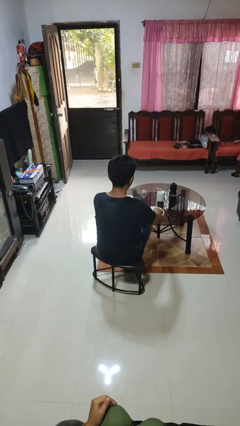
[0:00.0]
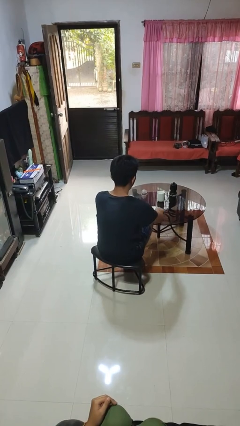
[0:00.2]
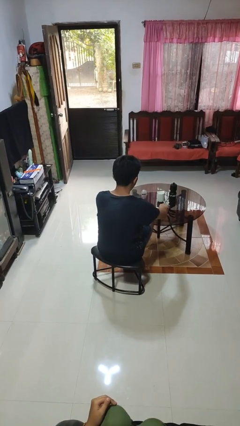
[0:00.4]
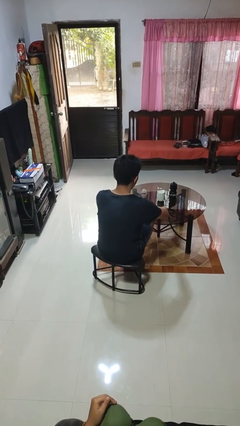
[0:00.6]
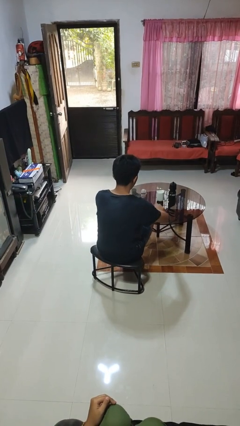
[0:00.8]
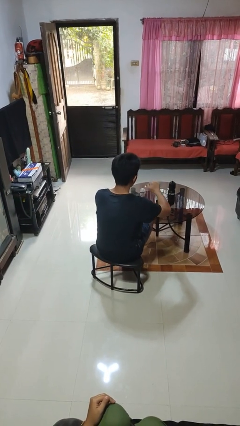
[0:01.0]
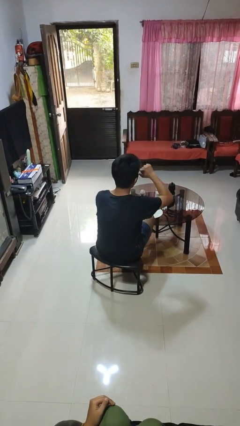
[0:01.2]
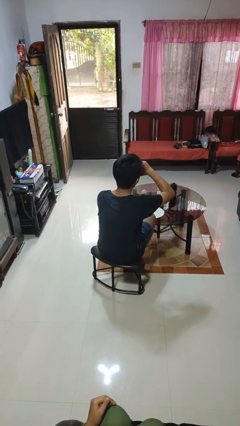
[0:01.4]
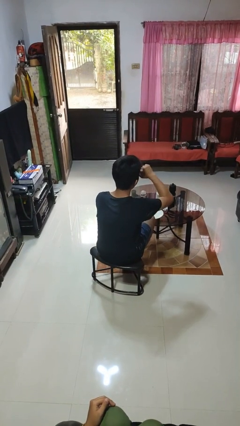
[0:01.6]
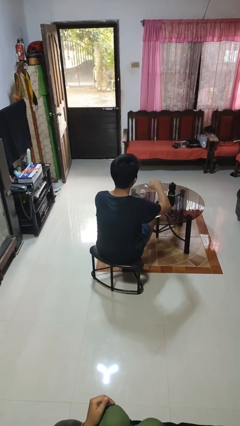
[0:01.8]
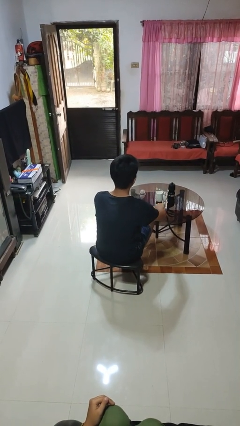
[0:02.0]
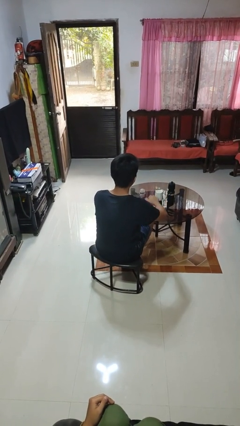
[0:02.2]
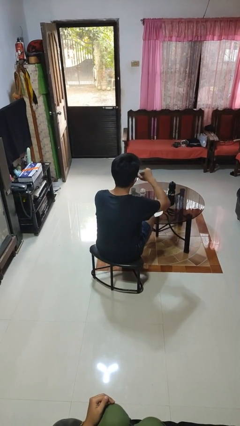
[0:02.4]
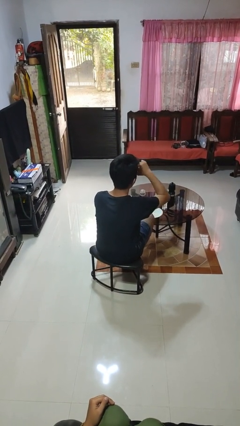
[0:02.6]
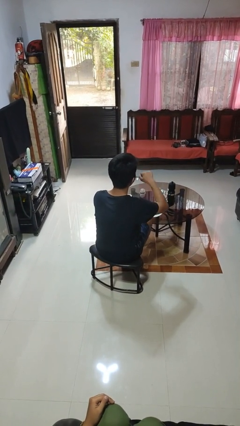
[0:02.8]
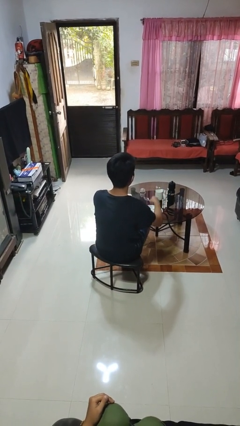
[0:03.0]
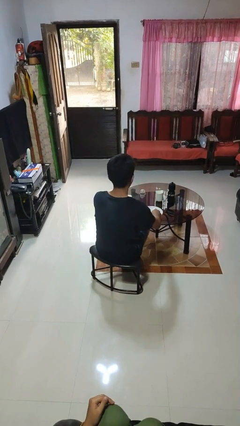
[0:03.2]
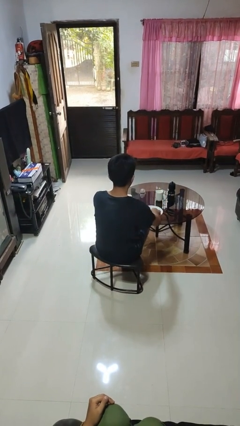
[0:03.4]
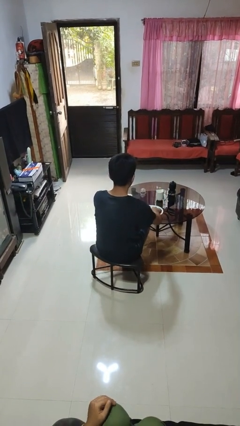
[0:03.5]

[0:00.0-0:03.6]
person eats with utensil

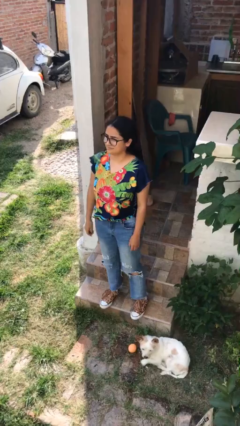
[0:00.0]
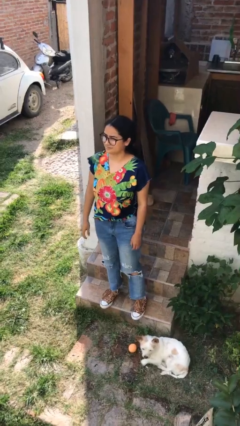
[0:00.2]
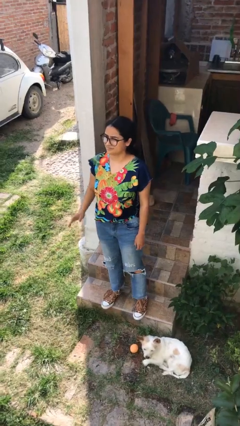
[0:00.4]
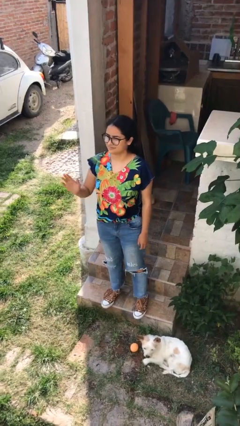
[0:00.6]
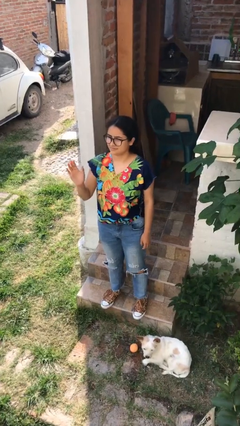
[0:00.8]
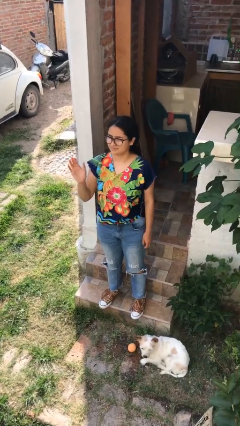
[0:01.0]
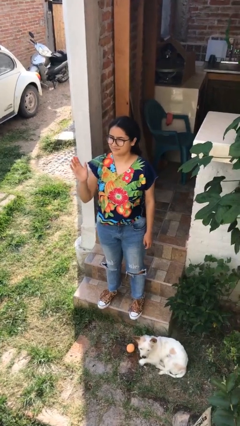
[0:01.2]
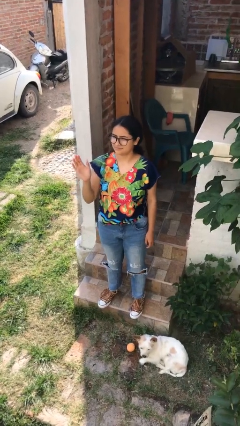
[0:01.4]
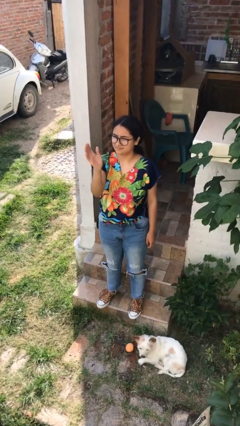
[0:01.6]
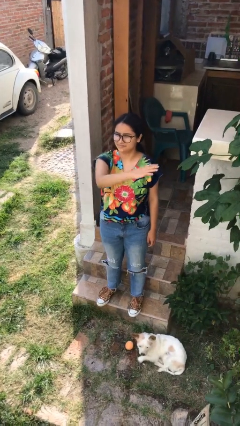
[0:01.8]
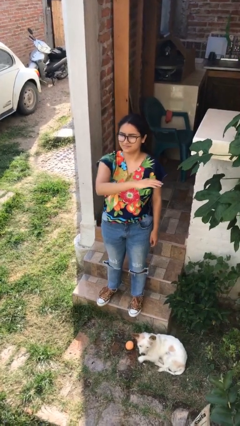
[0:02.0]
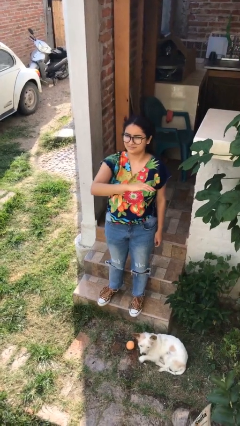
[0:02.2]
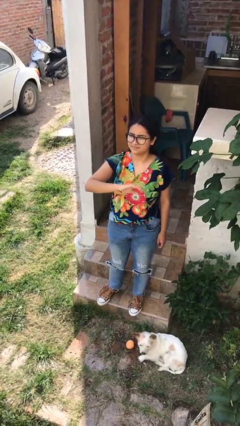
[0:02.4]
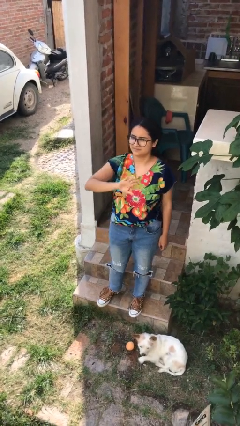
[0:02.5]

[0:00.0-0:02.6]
person gestures swipe left

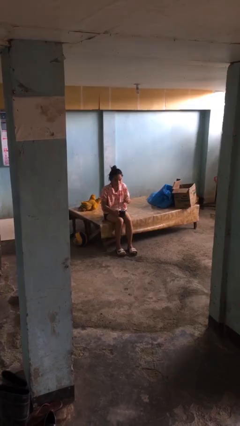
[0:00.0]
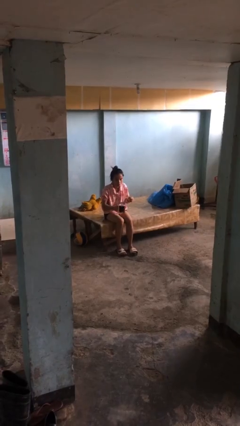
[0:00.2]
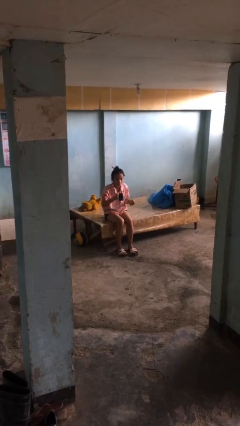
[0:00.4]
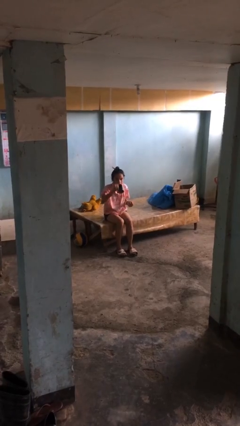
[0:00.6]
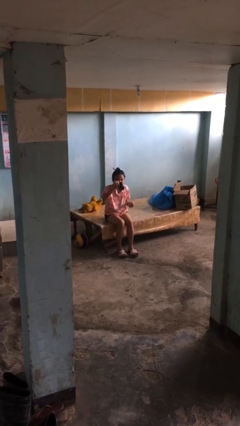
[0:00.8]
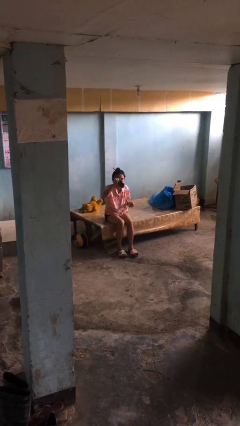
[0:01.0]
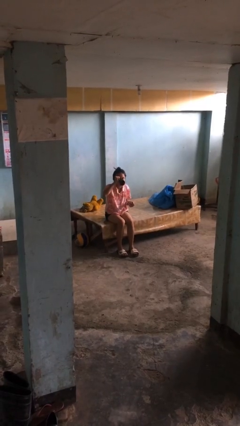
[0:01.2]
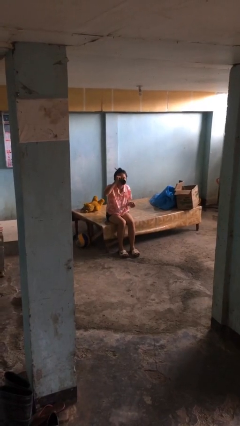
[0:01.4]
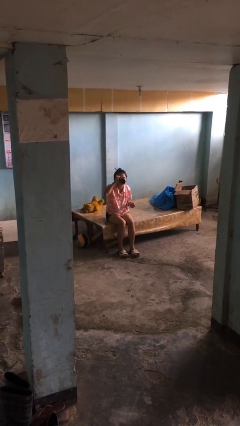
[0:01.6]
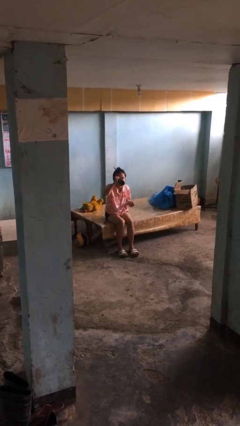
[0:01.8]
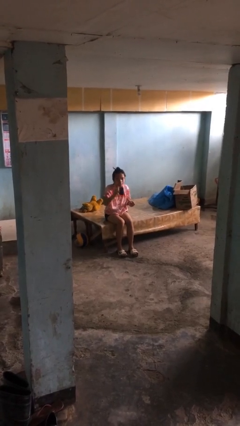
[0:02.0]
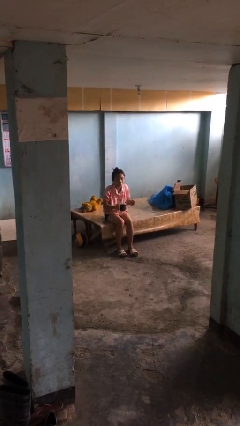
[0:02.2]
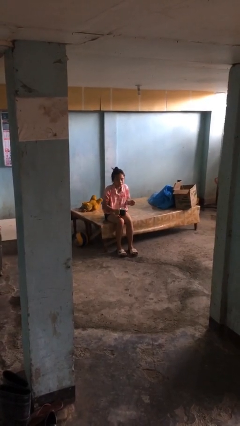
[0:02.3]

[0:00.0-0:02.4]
person drinks from mug

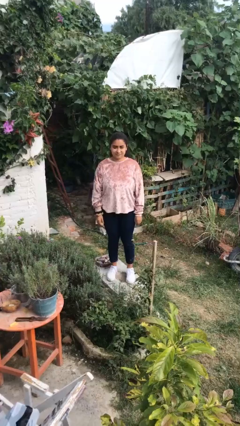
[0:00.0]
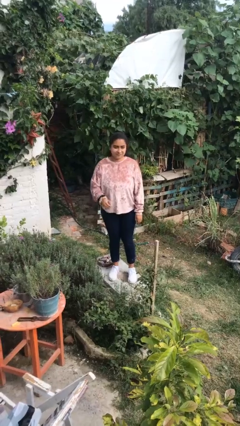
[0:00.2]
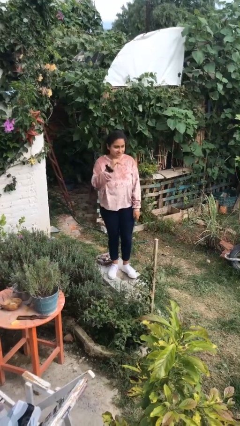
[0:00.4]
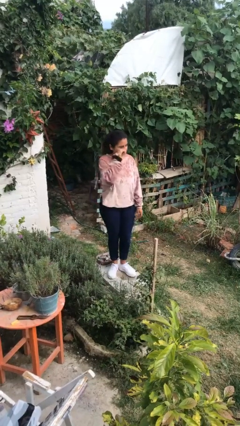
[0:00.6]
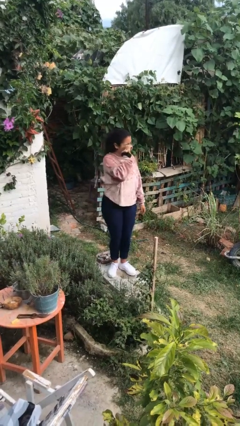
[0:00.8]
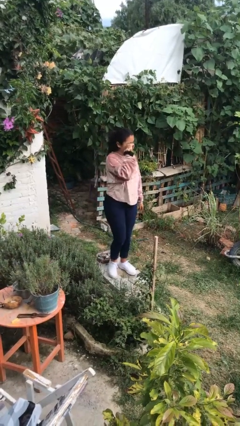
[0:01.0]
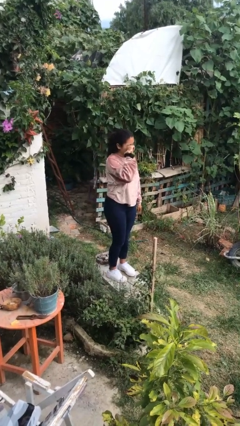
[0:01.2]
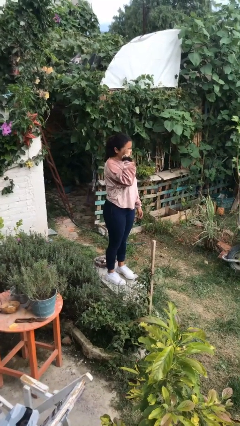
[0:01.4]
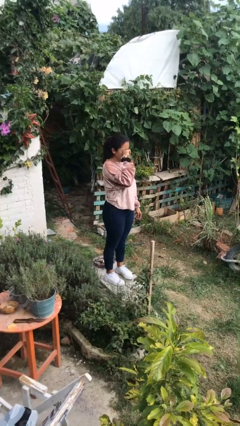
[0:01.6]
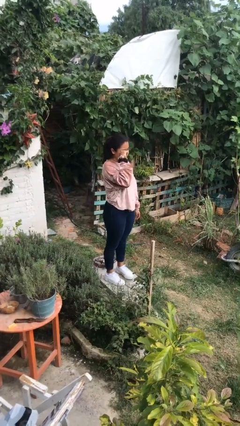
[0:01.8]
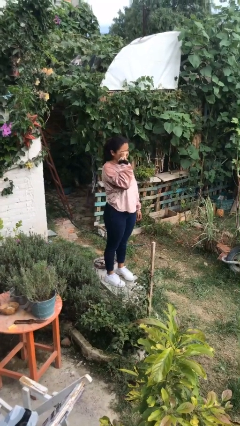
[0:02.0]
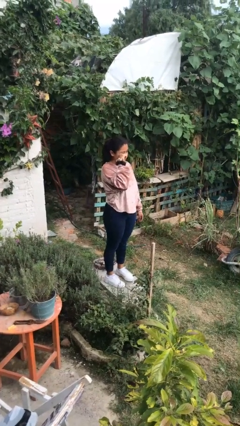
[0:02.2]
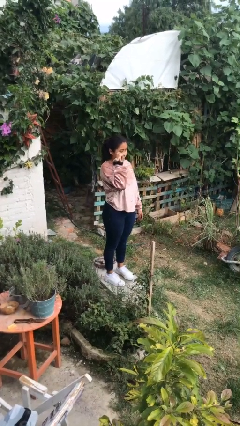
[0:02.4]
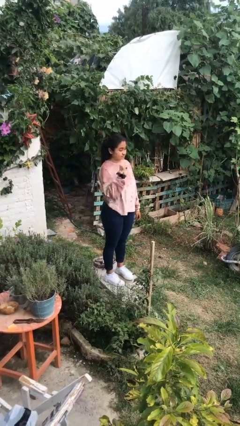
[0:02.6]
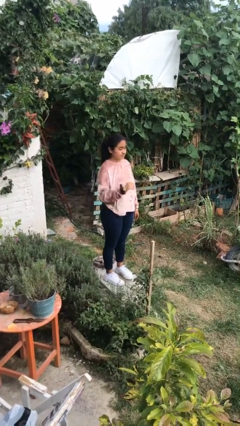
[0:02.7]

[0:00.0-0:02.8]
person rubs eyes

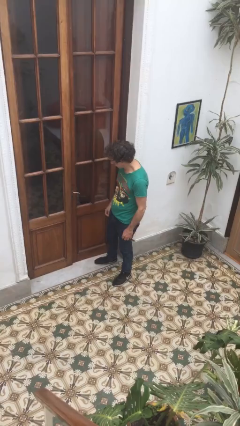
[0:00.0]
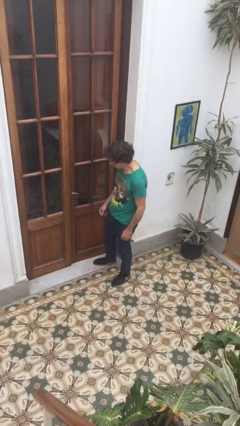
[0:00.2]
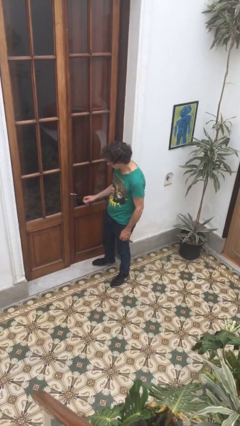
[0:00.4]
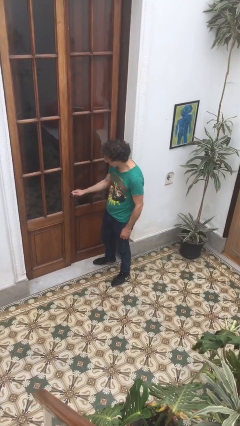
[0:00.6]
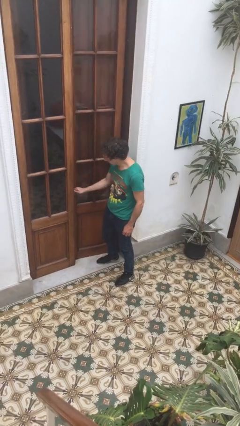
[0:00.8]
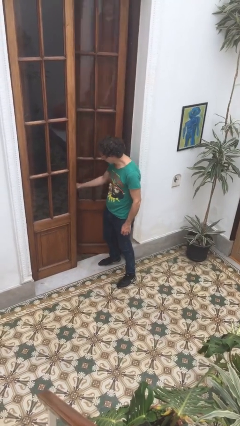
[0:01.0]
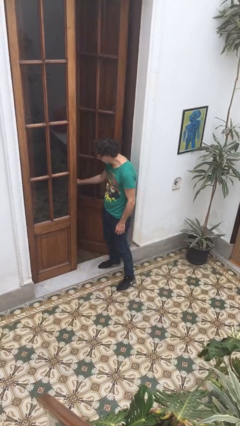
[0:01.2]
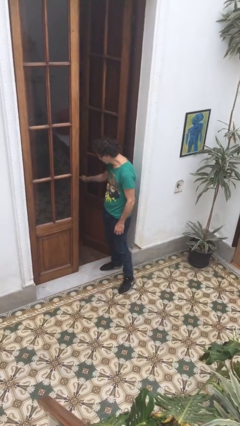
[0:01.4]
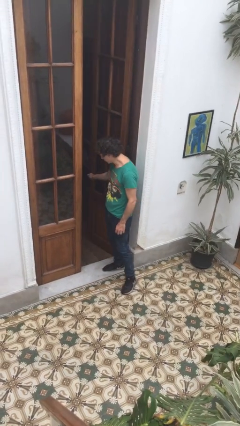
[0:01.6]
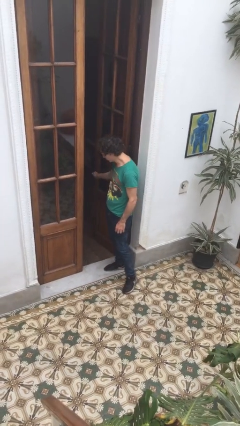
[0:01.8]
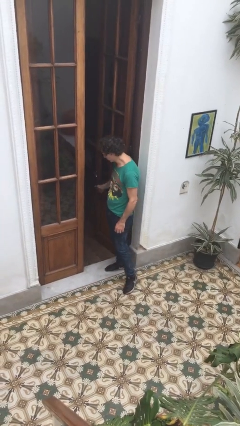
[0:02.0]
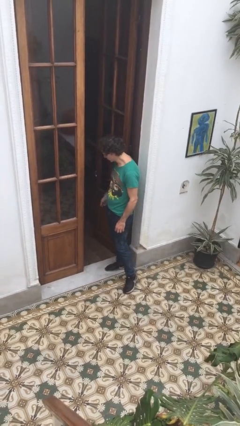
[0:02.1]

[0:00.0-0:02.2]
person opens facility door

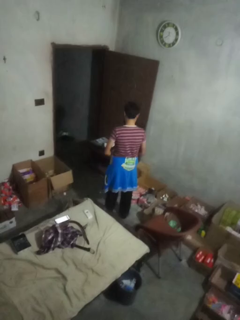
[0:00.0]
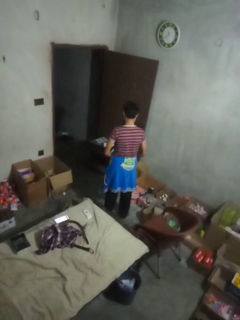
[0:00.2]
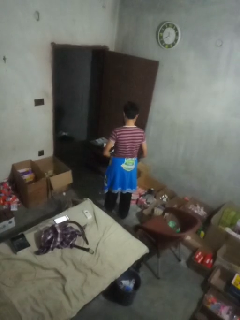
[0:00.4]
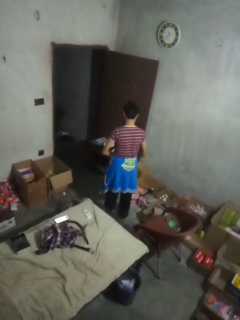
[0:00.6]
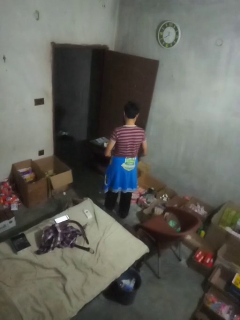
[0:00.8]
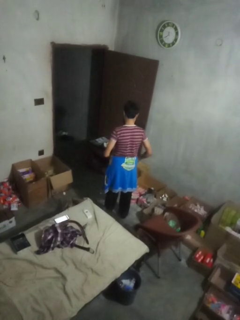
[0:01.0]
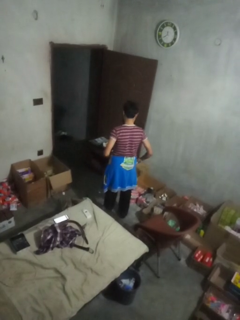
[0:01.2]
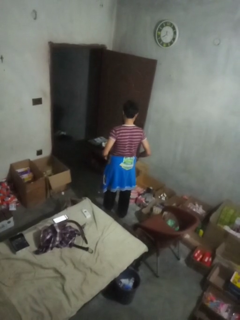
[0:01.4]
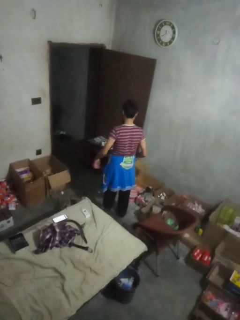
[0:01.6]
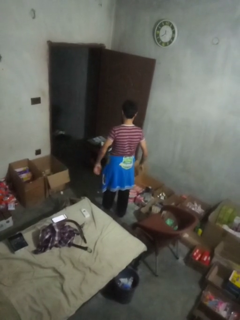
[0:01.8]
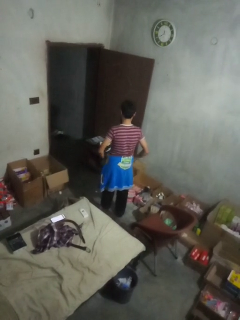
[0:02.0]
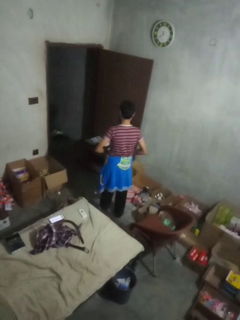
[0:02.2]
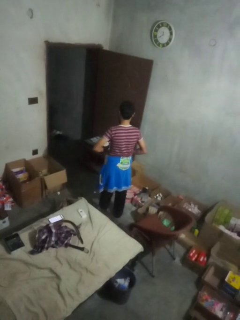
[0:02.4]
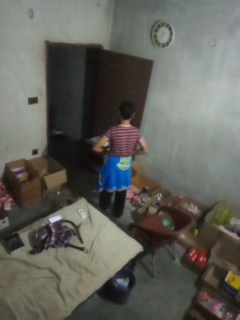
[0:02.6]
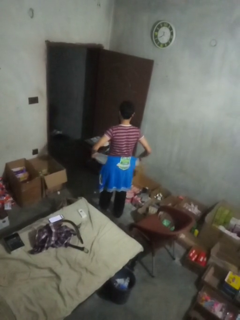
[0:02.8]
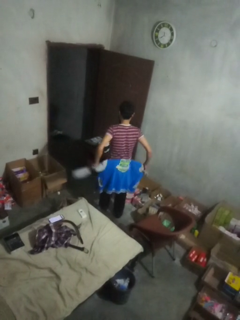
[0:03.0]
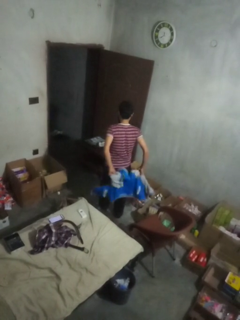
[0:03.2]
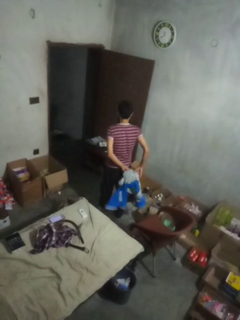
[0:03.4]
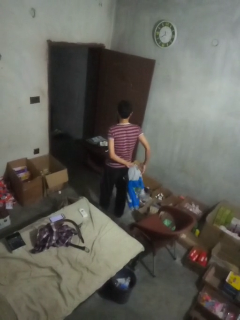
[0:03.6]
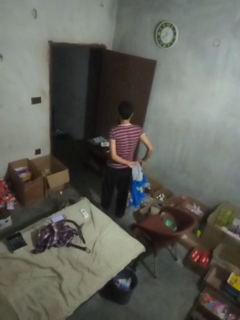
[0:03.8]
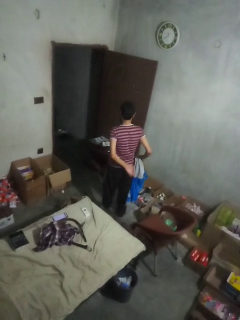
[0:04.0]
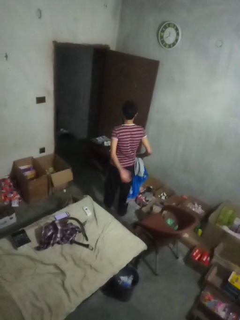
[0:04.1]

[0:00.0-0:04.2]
person unties jacket around waist

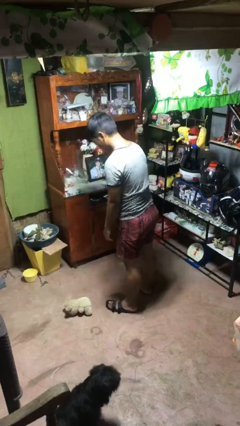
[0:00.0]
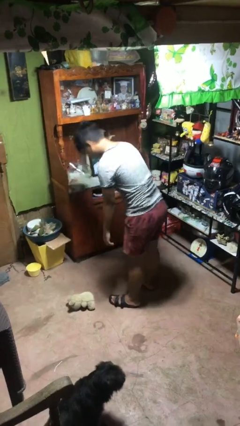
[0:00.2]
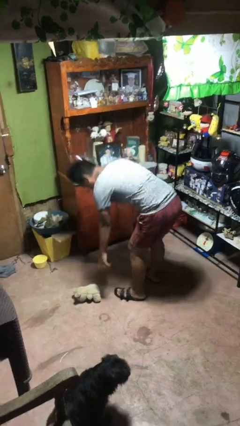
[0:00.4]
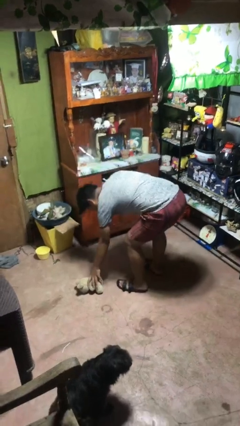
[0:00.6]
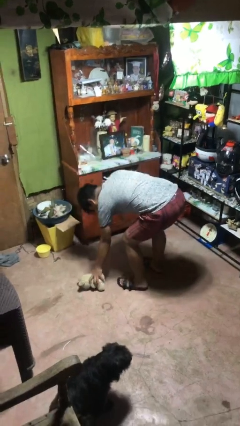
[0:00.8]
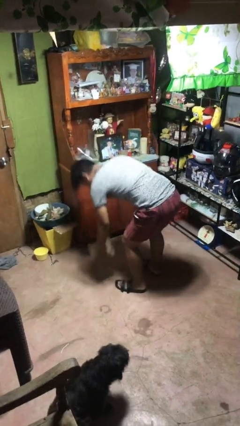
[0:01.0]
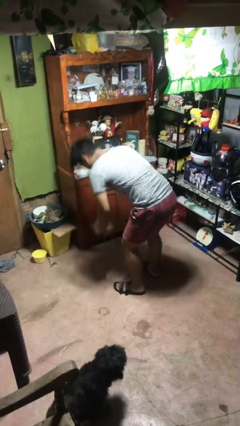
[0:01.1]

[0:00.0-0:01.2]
person picks up object from floor
